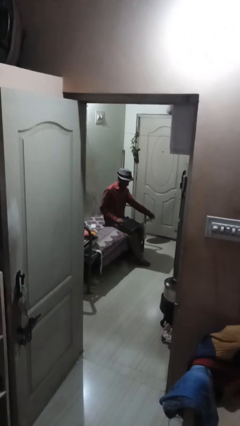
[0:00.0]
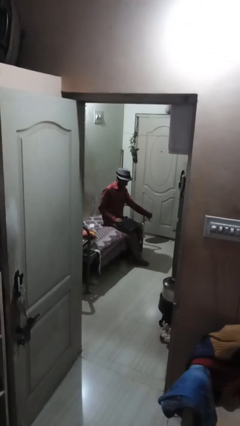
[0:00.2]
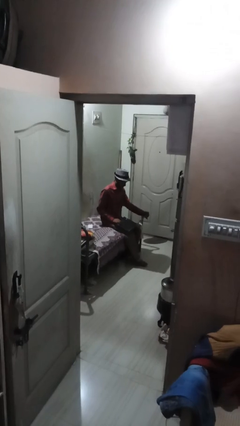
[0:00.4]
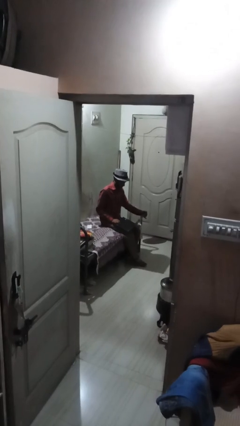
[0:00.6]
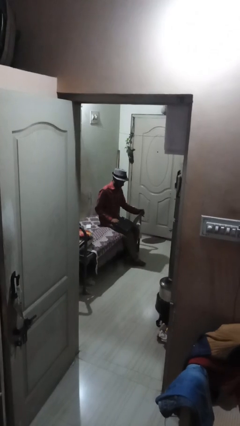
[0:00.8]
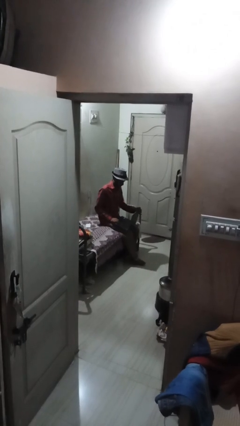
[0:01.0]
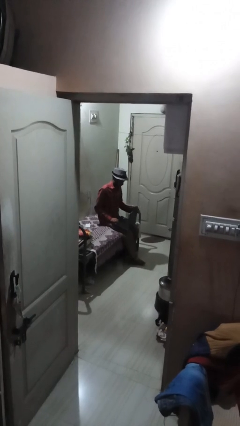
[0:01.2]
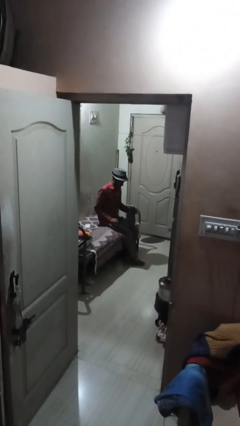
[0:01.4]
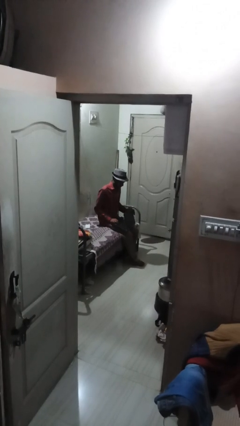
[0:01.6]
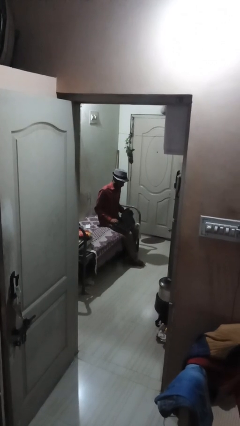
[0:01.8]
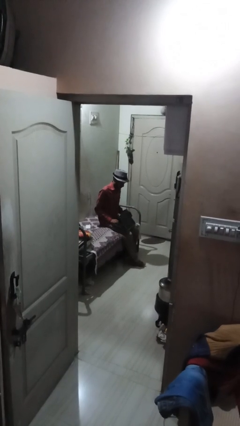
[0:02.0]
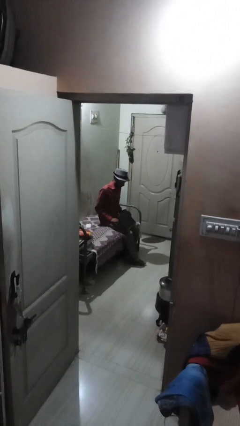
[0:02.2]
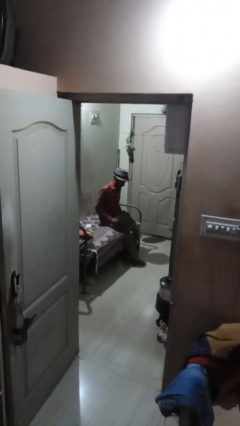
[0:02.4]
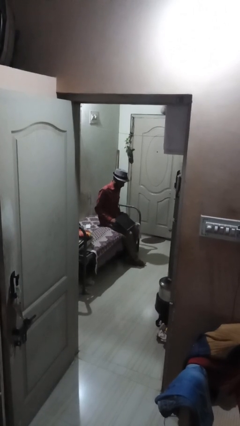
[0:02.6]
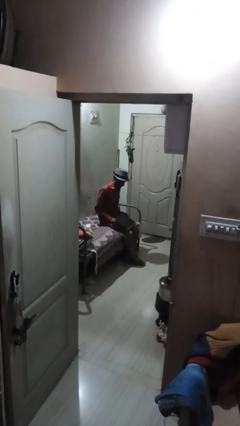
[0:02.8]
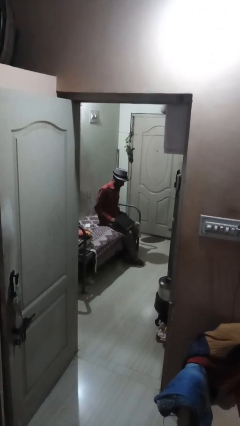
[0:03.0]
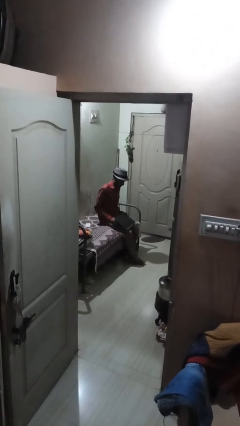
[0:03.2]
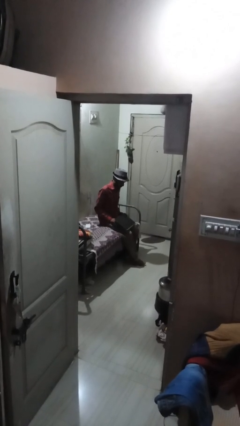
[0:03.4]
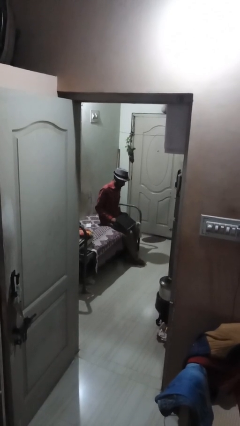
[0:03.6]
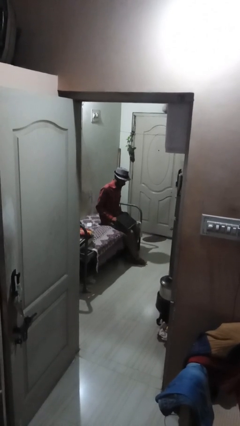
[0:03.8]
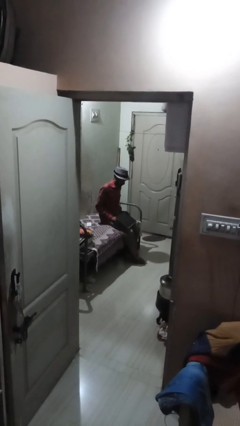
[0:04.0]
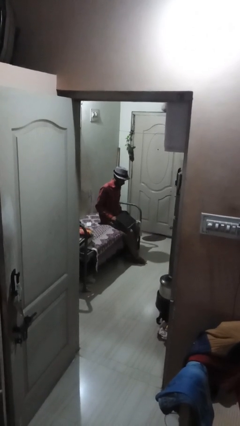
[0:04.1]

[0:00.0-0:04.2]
person closes laptop

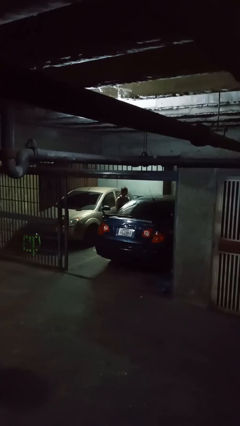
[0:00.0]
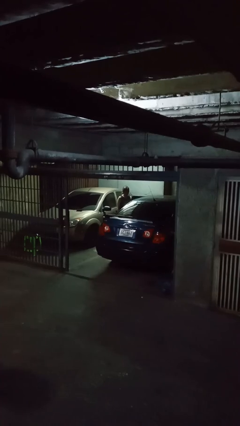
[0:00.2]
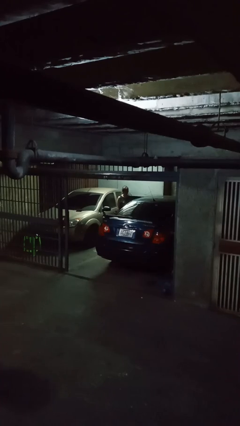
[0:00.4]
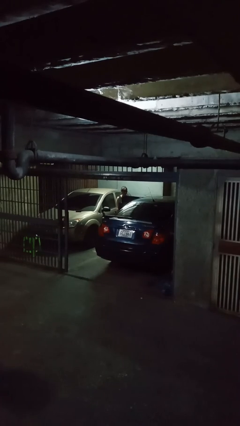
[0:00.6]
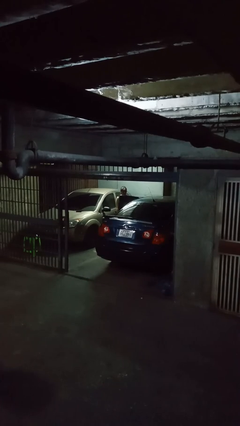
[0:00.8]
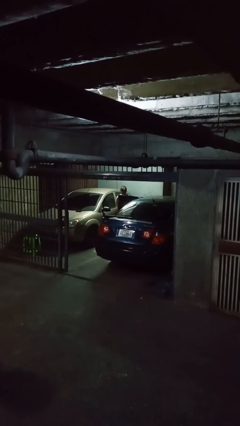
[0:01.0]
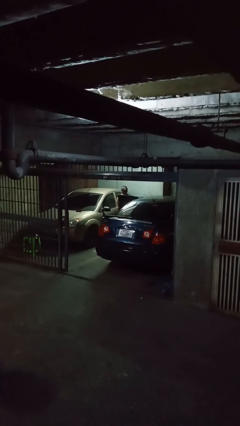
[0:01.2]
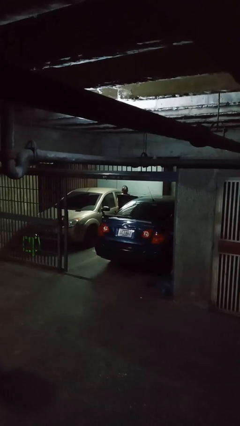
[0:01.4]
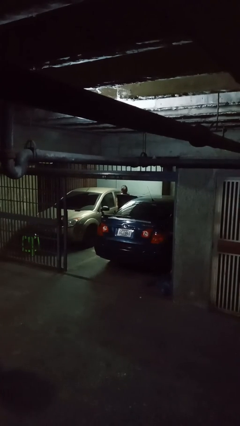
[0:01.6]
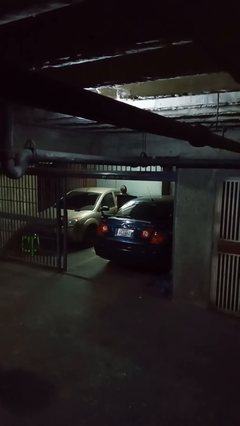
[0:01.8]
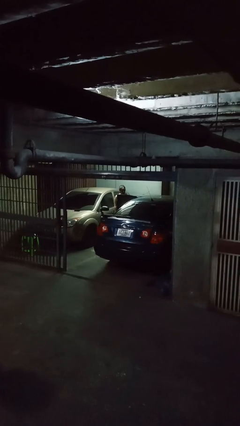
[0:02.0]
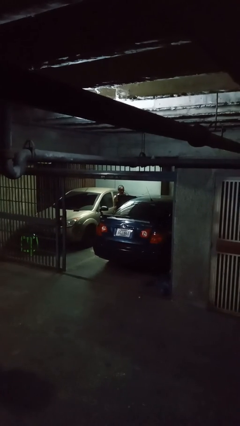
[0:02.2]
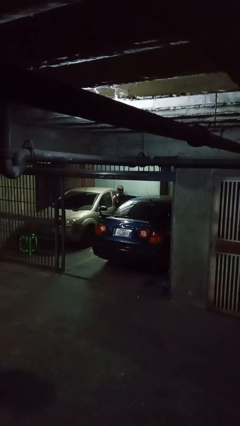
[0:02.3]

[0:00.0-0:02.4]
person opens car door

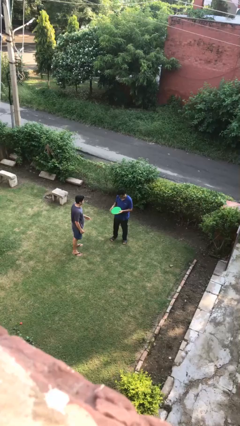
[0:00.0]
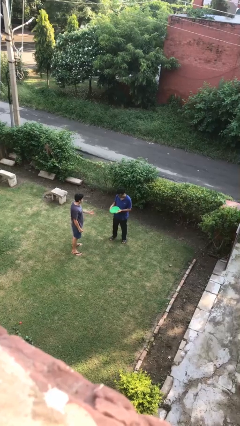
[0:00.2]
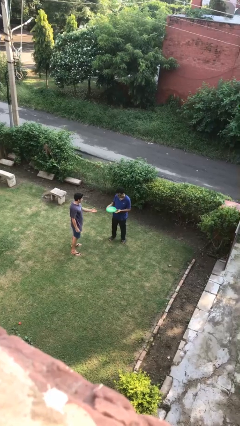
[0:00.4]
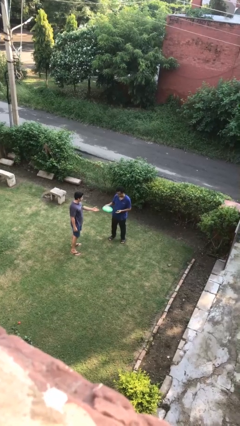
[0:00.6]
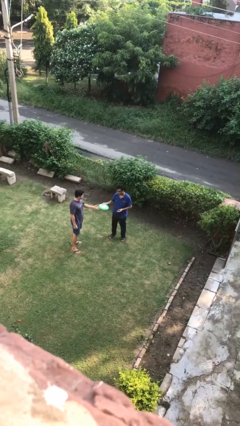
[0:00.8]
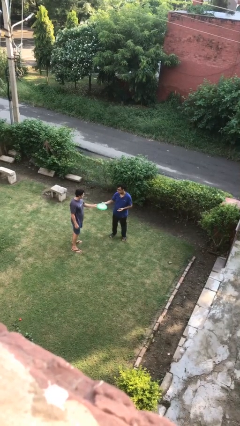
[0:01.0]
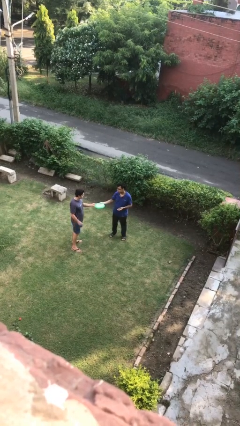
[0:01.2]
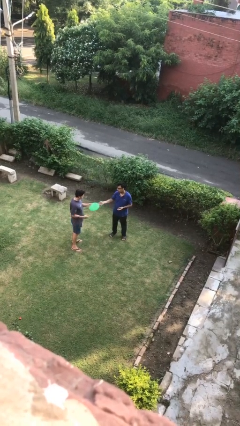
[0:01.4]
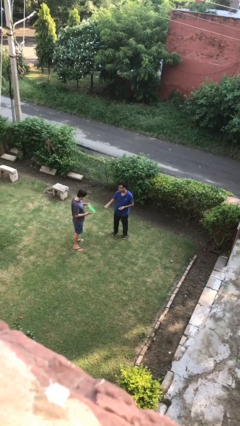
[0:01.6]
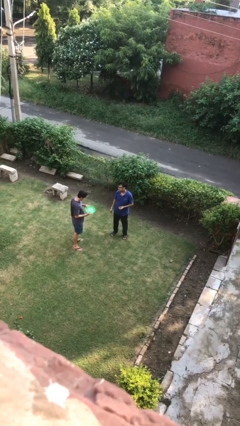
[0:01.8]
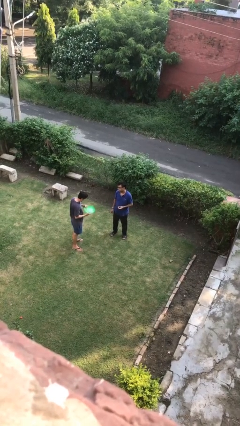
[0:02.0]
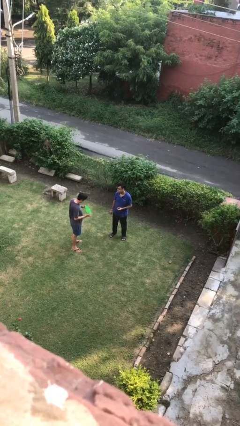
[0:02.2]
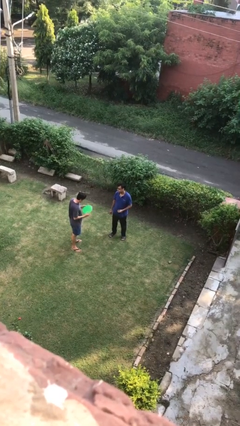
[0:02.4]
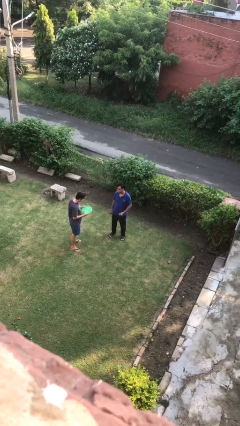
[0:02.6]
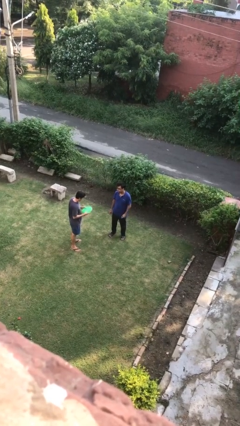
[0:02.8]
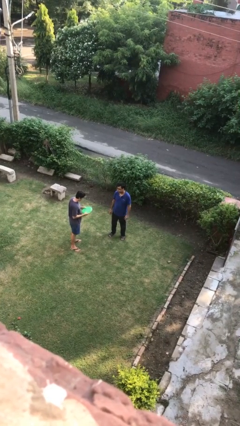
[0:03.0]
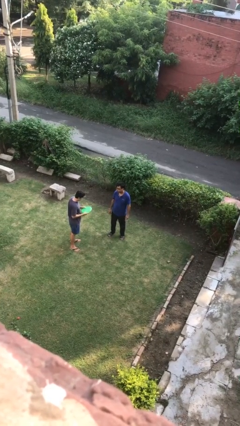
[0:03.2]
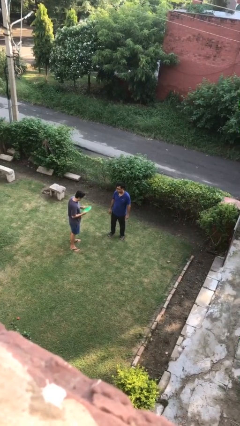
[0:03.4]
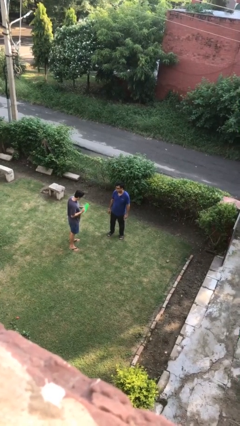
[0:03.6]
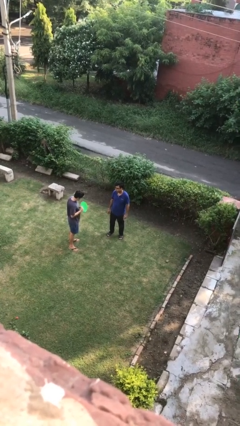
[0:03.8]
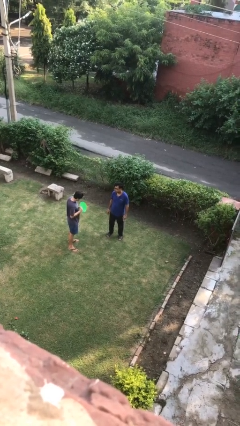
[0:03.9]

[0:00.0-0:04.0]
person transfers object to person

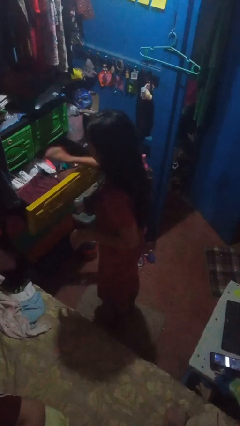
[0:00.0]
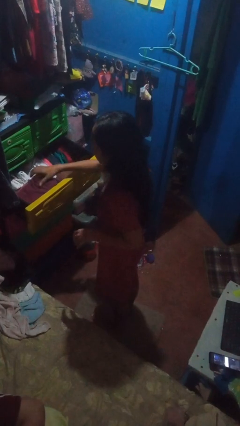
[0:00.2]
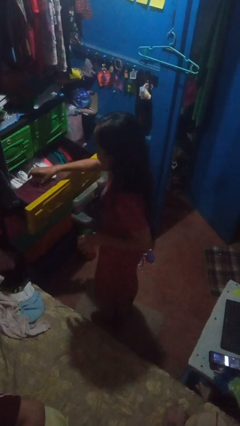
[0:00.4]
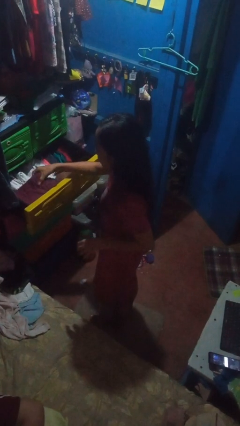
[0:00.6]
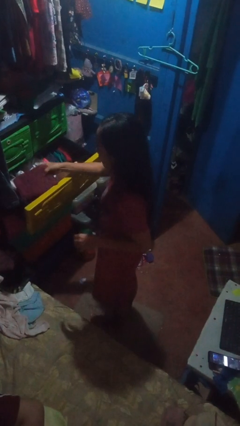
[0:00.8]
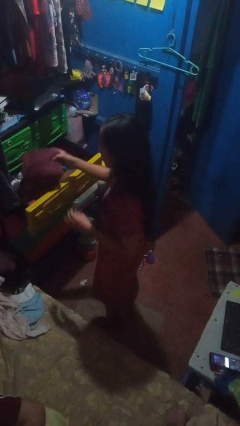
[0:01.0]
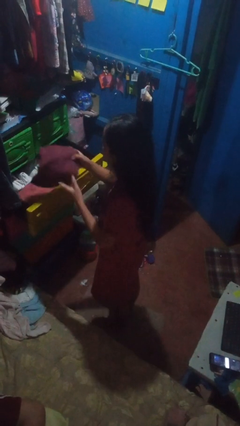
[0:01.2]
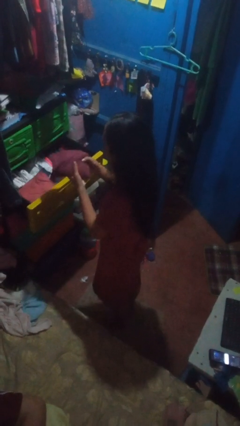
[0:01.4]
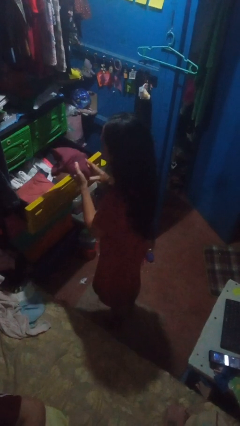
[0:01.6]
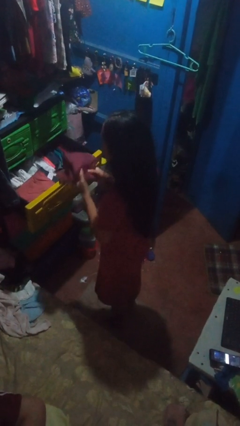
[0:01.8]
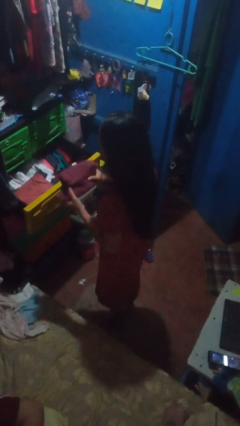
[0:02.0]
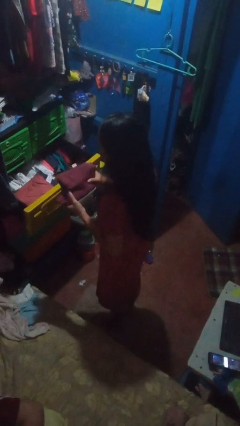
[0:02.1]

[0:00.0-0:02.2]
person takes clothes from dresser

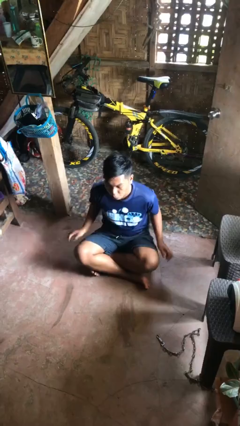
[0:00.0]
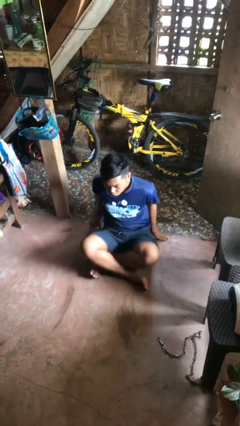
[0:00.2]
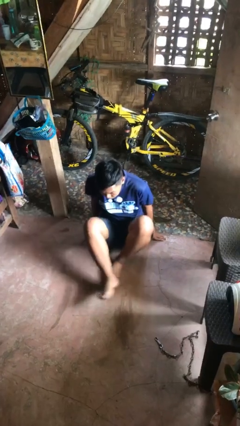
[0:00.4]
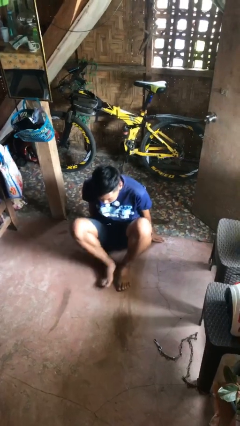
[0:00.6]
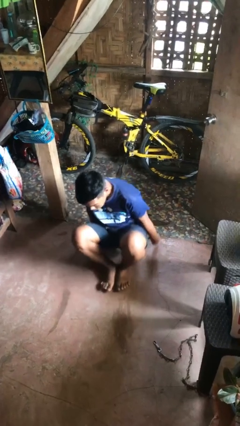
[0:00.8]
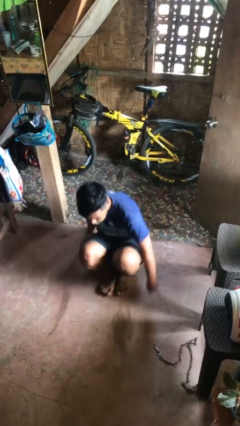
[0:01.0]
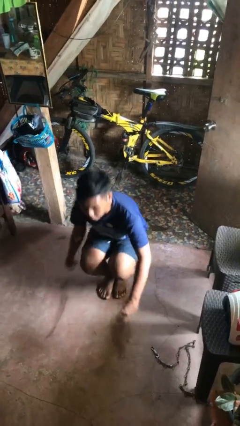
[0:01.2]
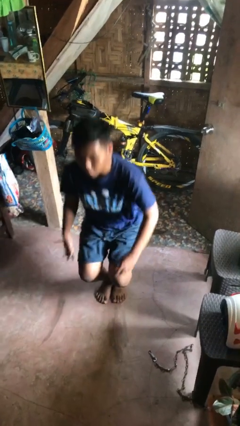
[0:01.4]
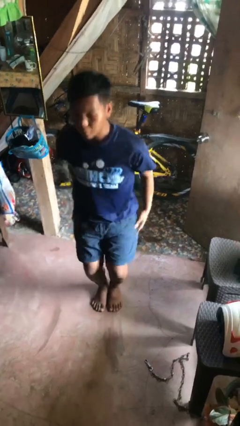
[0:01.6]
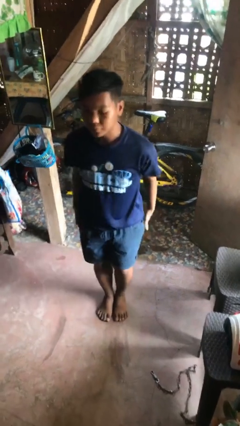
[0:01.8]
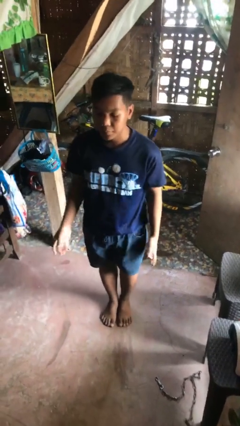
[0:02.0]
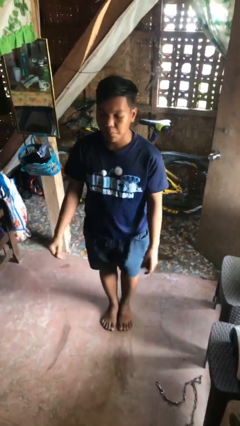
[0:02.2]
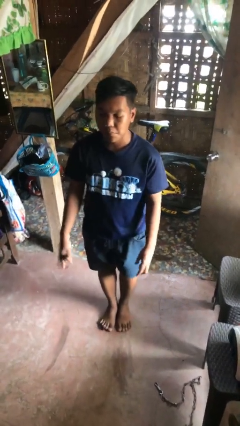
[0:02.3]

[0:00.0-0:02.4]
person stands up from floor

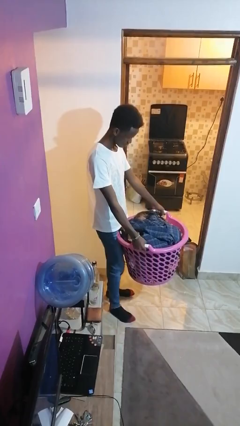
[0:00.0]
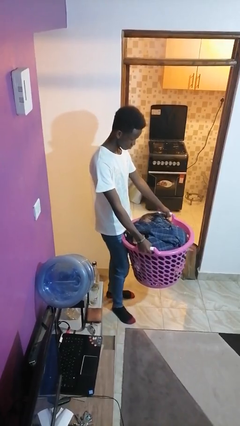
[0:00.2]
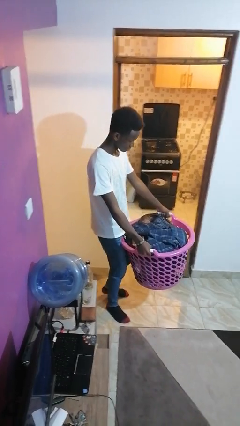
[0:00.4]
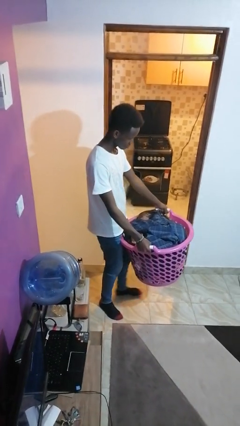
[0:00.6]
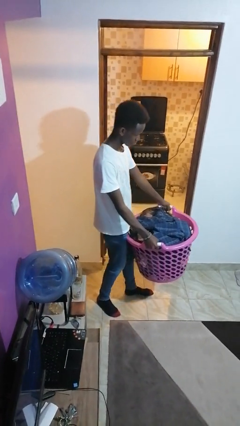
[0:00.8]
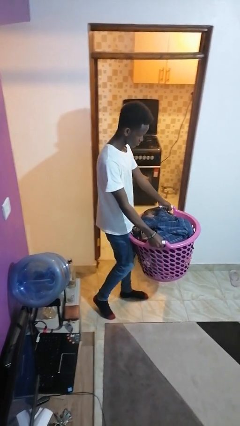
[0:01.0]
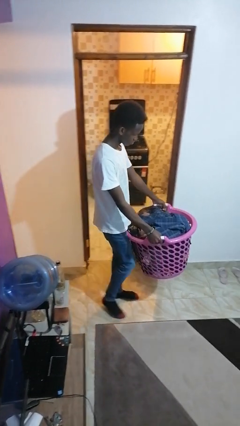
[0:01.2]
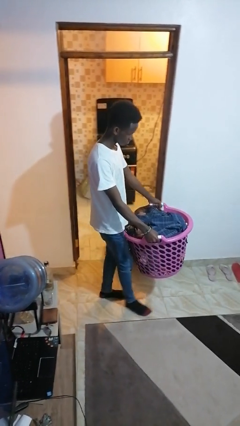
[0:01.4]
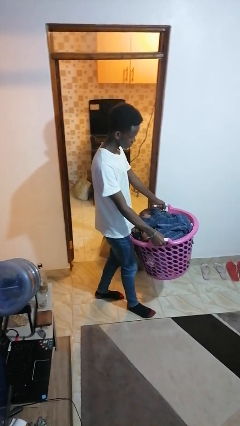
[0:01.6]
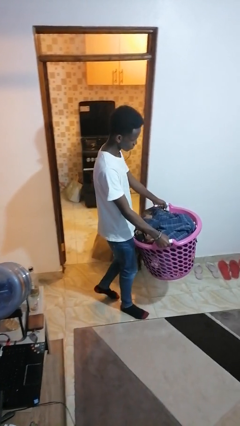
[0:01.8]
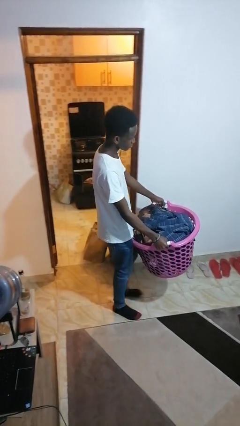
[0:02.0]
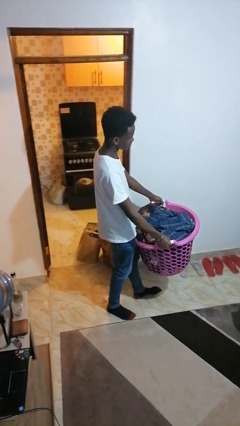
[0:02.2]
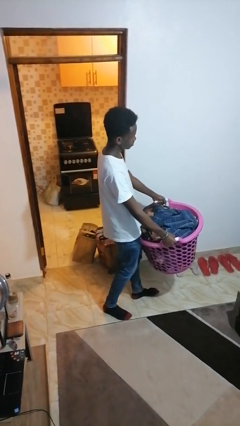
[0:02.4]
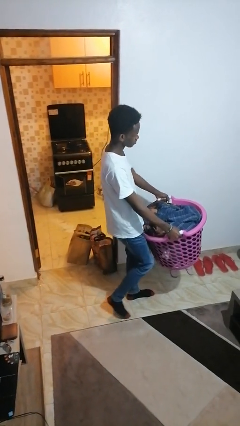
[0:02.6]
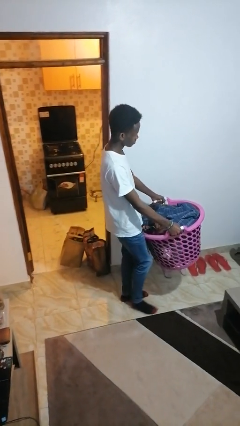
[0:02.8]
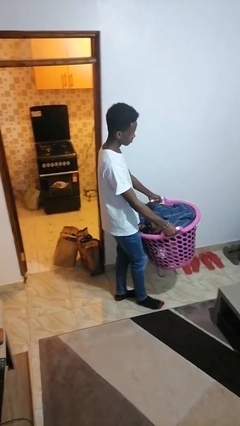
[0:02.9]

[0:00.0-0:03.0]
person carries laundry basket
